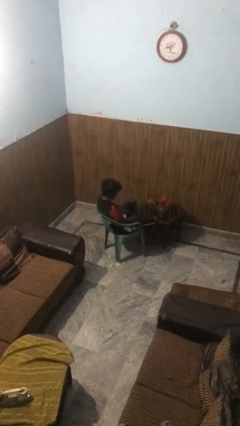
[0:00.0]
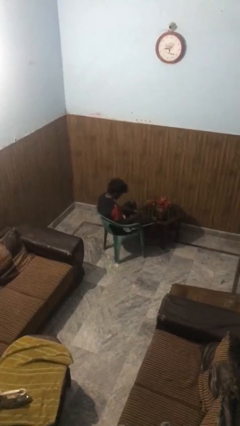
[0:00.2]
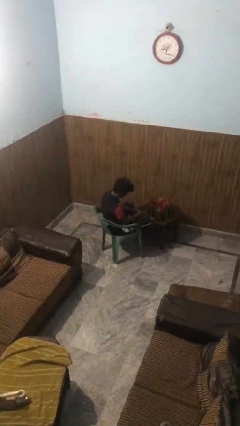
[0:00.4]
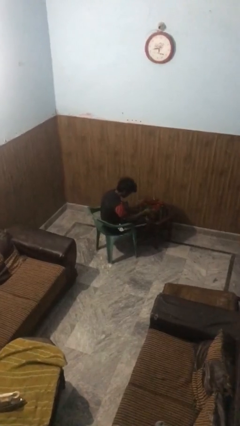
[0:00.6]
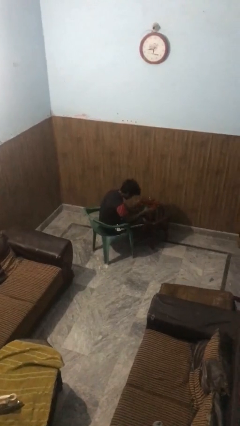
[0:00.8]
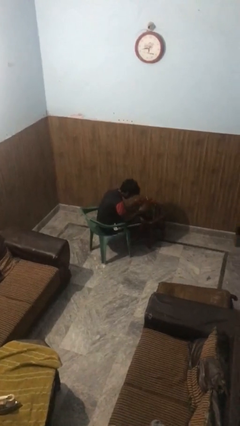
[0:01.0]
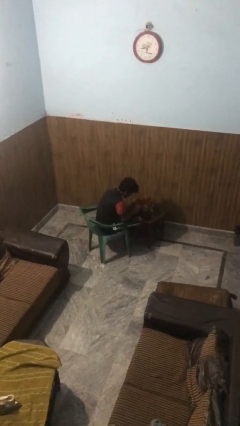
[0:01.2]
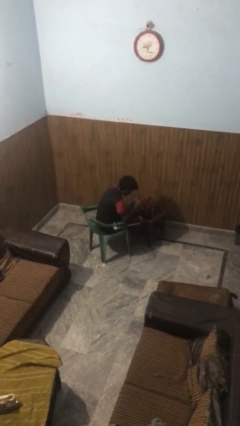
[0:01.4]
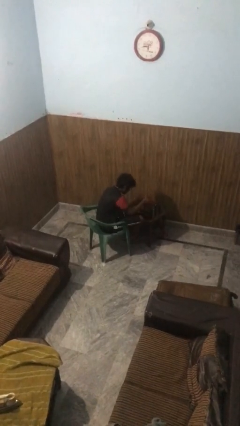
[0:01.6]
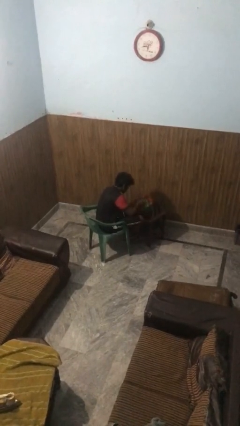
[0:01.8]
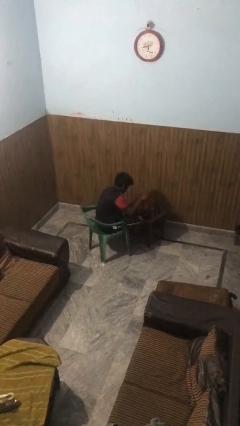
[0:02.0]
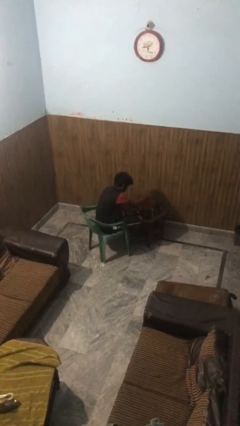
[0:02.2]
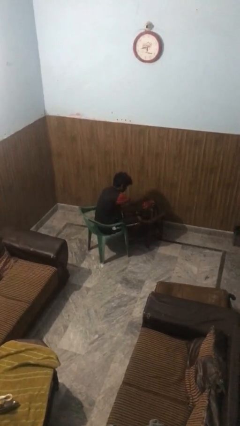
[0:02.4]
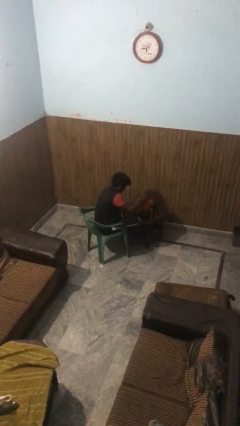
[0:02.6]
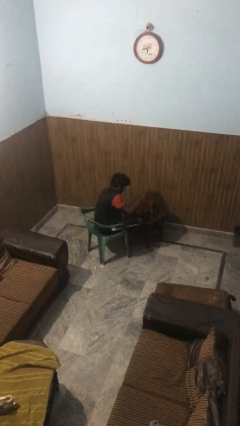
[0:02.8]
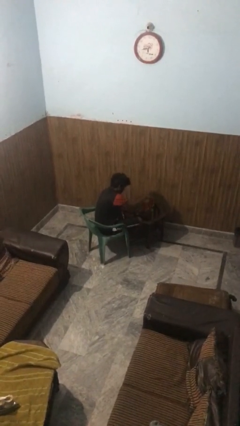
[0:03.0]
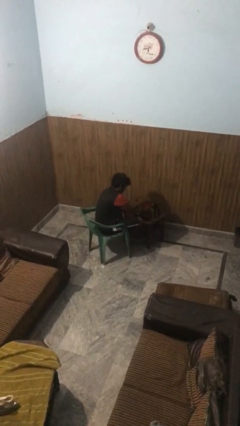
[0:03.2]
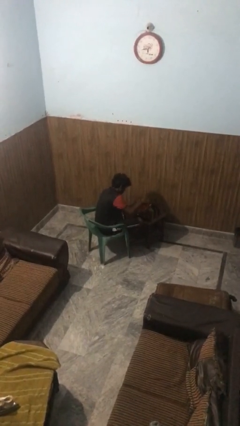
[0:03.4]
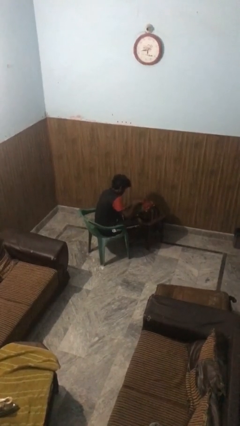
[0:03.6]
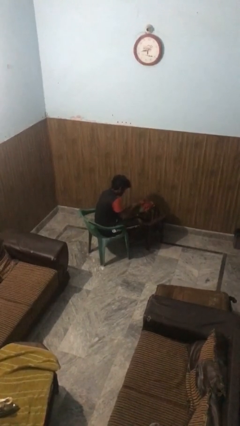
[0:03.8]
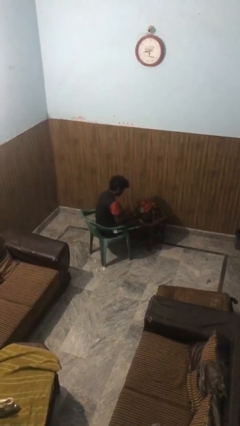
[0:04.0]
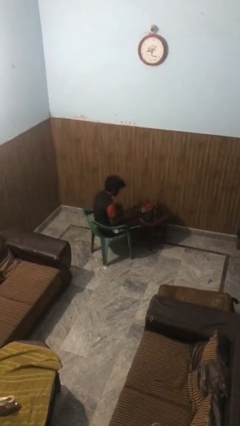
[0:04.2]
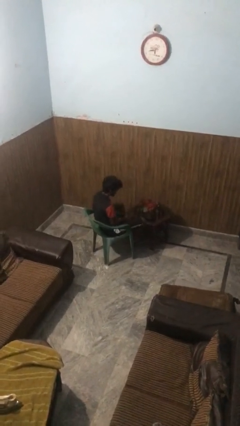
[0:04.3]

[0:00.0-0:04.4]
person arranges flowers in vase

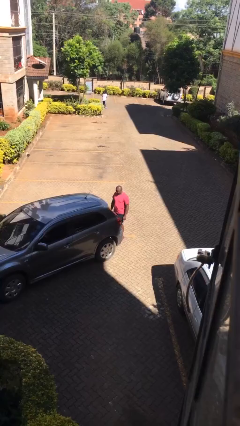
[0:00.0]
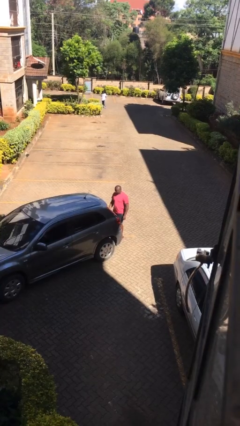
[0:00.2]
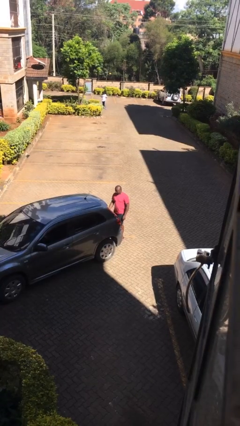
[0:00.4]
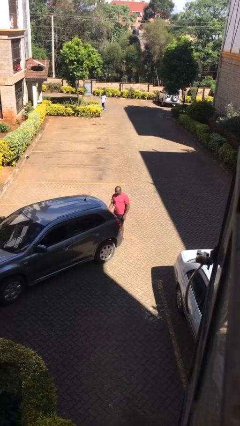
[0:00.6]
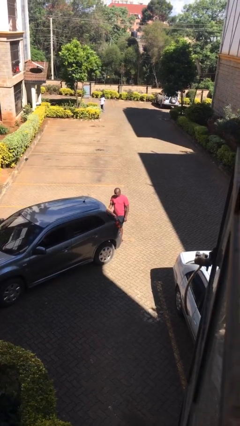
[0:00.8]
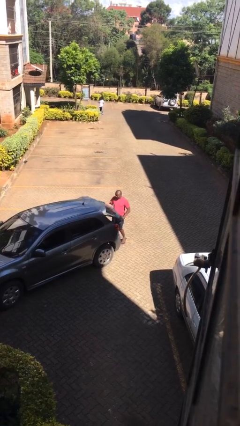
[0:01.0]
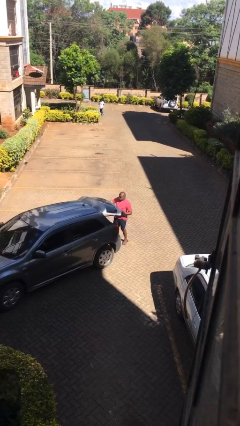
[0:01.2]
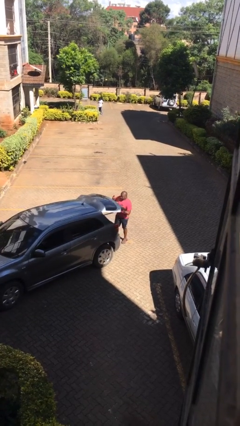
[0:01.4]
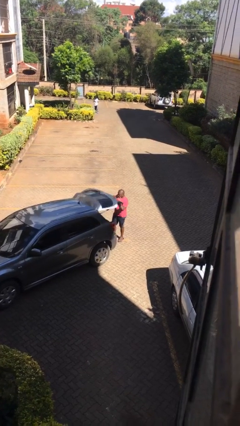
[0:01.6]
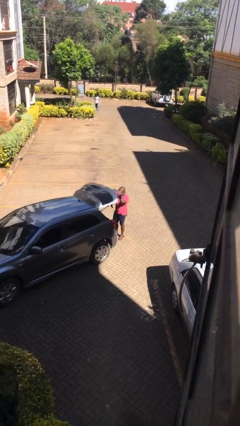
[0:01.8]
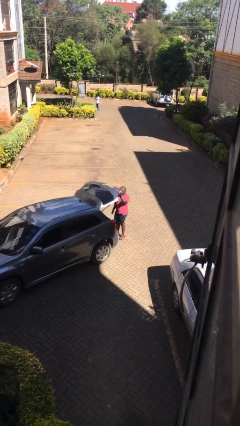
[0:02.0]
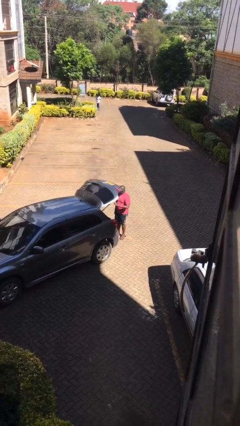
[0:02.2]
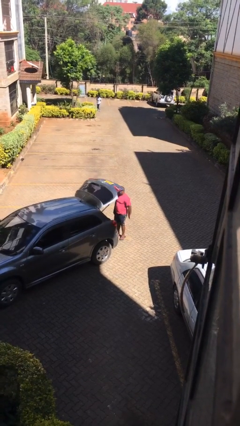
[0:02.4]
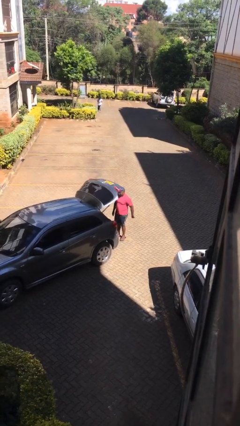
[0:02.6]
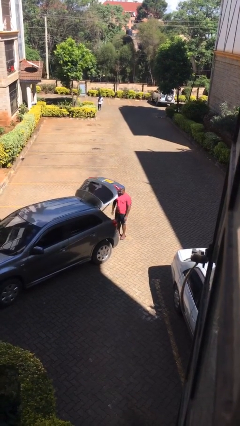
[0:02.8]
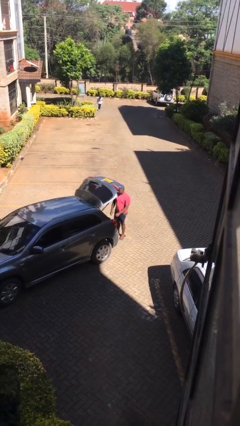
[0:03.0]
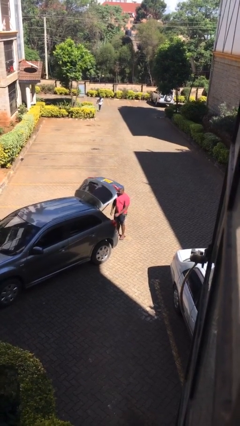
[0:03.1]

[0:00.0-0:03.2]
person opens car trunk

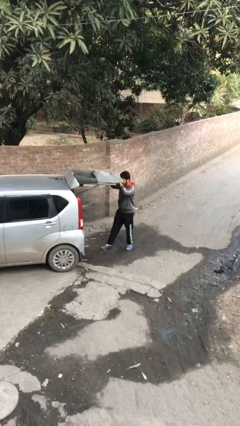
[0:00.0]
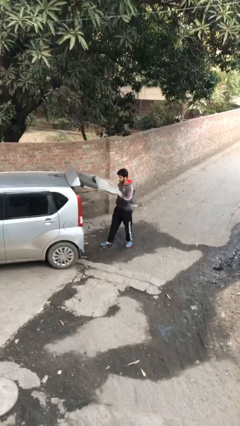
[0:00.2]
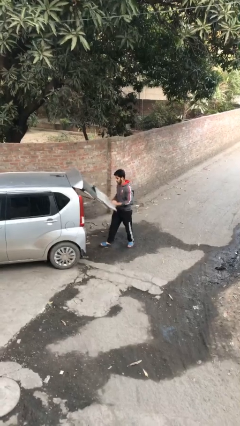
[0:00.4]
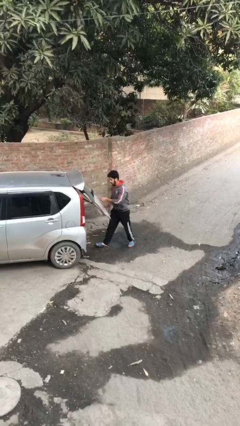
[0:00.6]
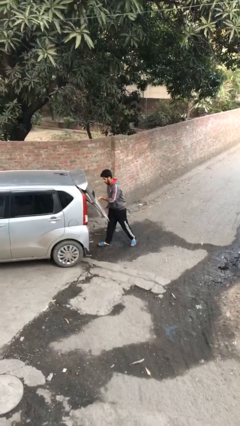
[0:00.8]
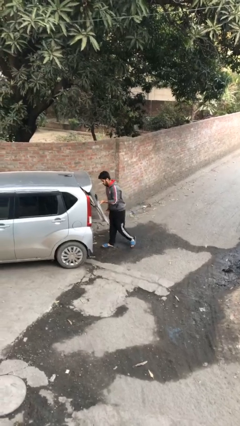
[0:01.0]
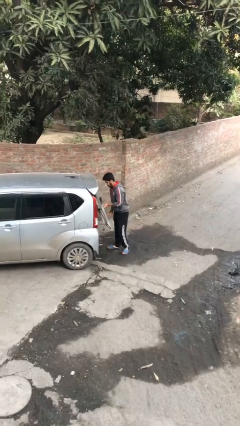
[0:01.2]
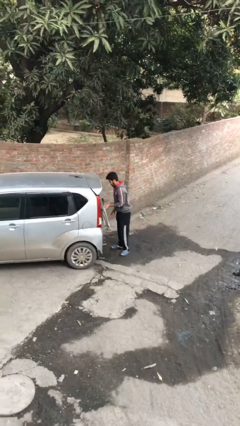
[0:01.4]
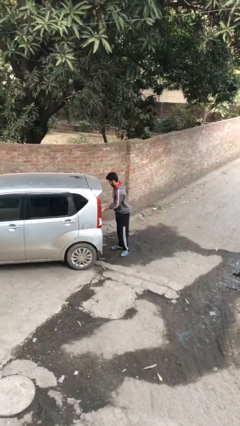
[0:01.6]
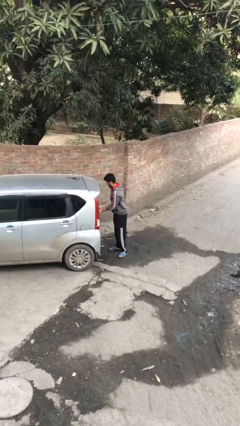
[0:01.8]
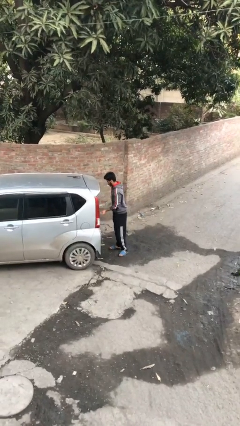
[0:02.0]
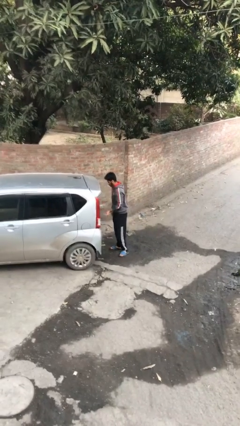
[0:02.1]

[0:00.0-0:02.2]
person closes car trunk

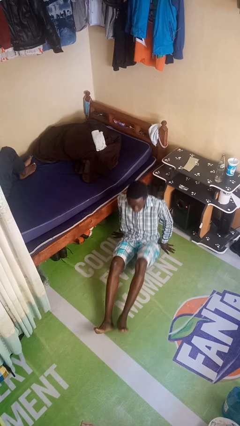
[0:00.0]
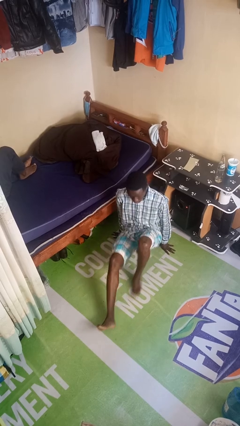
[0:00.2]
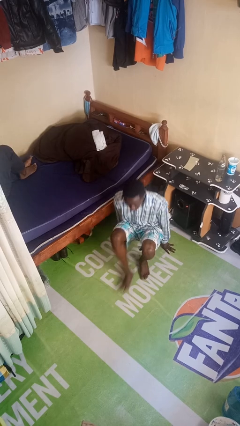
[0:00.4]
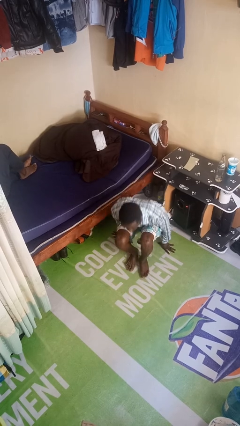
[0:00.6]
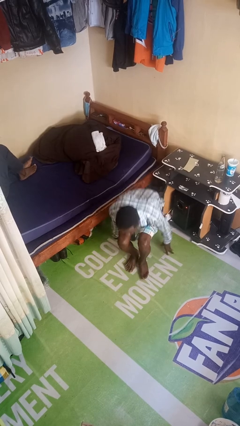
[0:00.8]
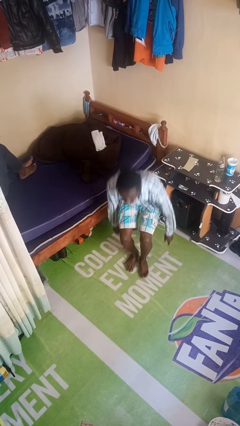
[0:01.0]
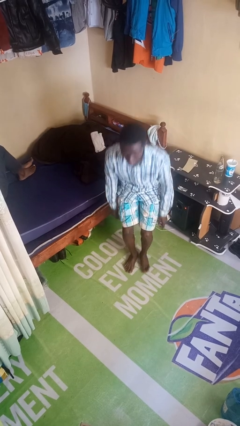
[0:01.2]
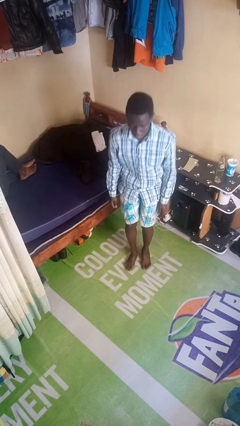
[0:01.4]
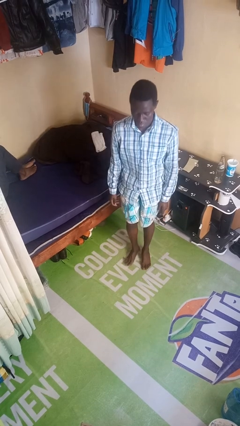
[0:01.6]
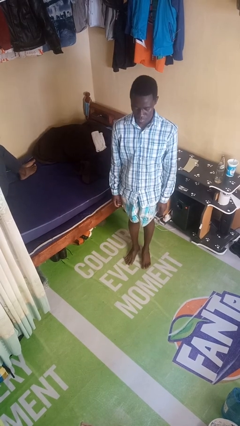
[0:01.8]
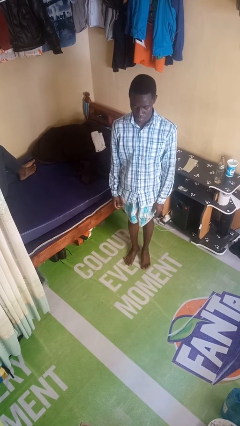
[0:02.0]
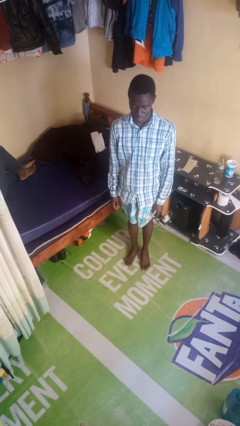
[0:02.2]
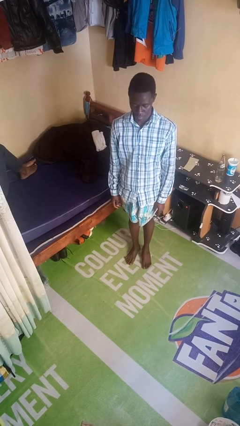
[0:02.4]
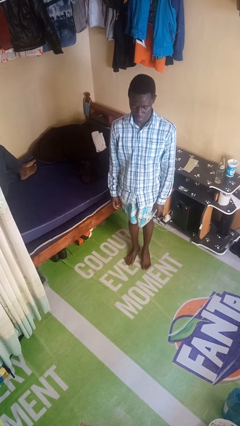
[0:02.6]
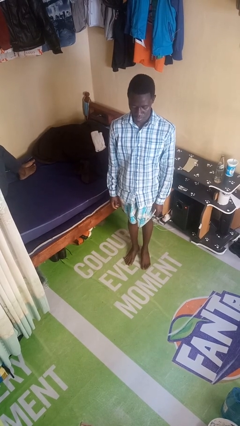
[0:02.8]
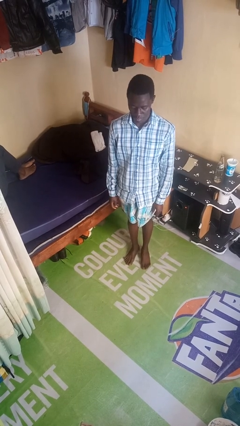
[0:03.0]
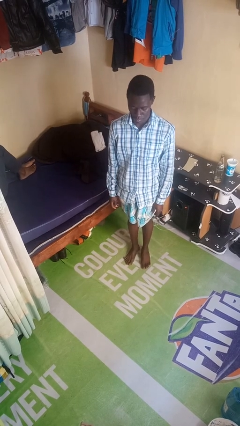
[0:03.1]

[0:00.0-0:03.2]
person stands up from floor

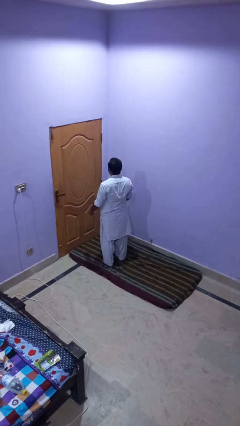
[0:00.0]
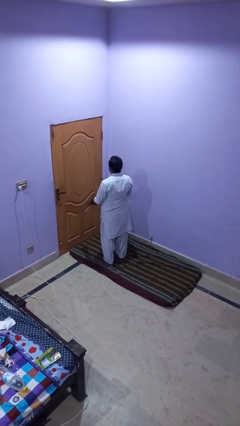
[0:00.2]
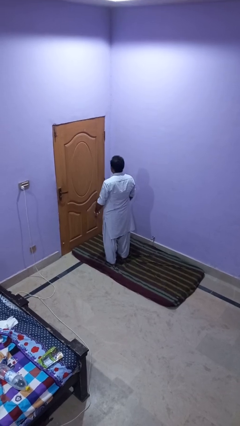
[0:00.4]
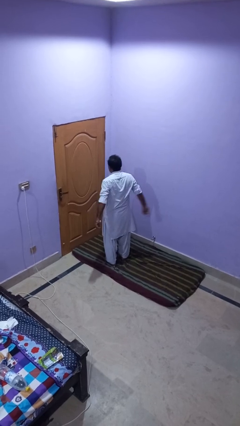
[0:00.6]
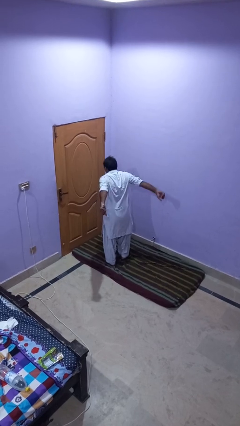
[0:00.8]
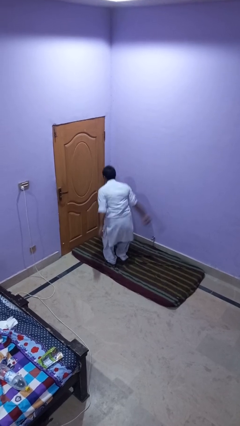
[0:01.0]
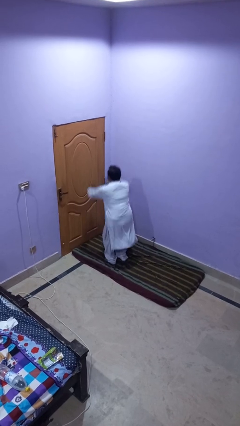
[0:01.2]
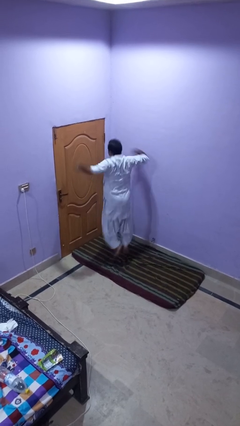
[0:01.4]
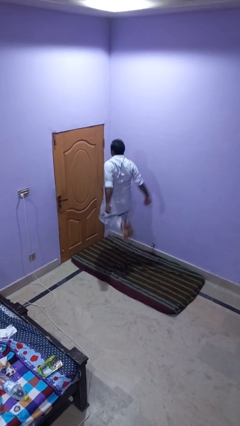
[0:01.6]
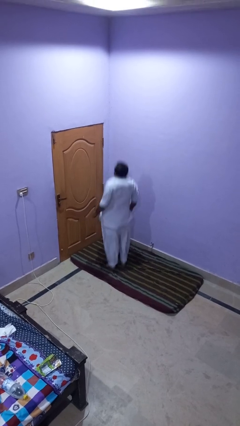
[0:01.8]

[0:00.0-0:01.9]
person jumps

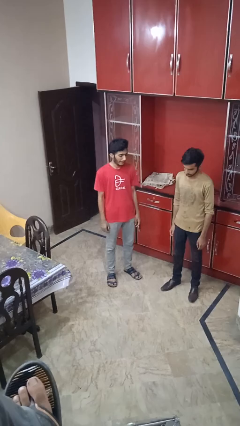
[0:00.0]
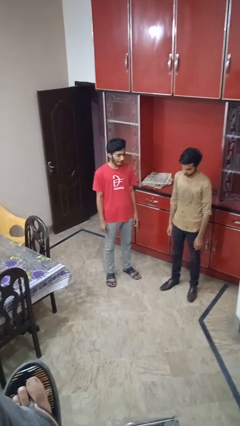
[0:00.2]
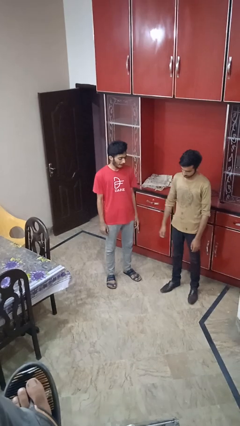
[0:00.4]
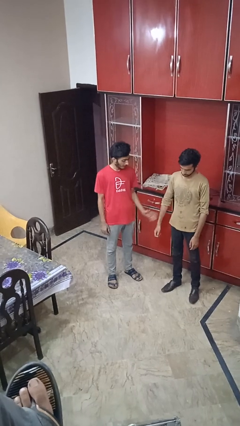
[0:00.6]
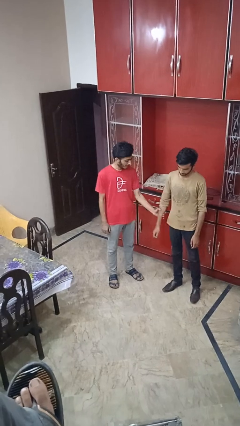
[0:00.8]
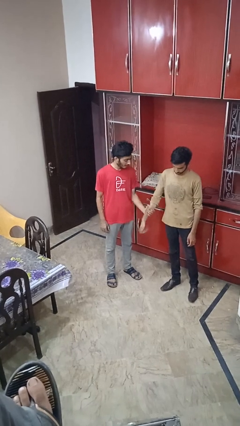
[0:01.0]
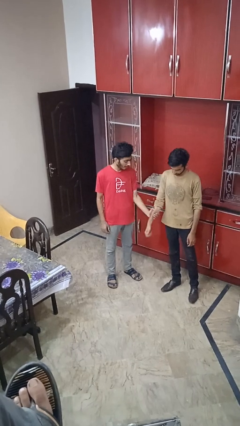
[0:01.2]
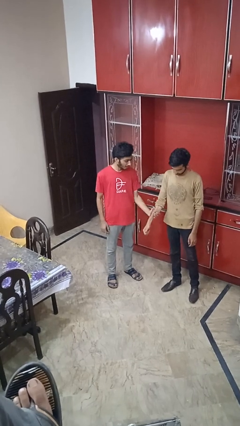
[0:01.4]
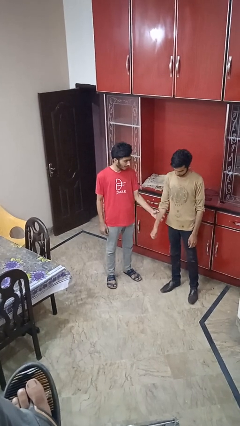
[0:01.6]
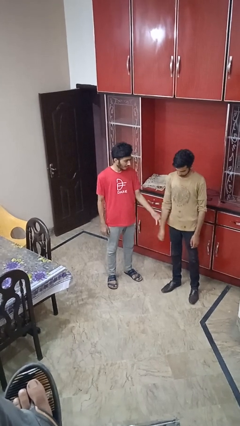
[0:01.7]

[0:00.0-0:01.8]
person grabs person by forearm

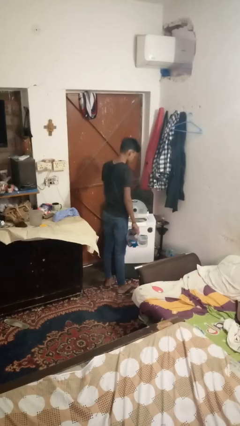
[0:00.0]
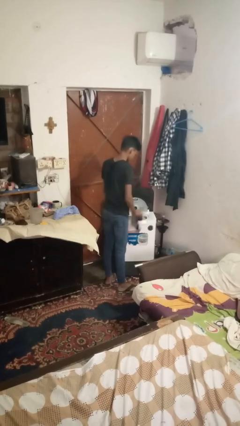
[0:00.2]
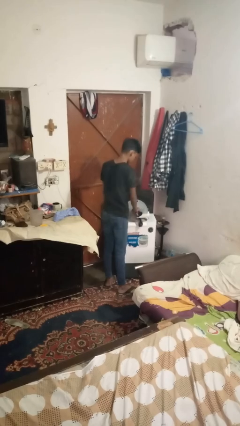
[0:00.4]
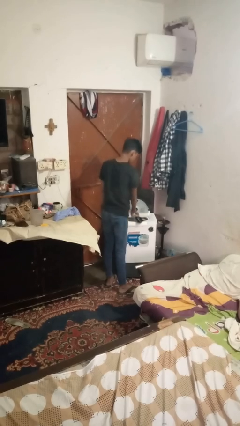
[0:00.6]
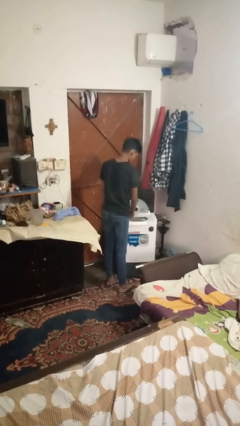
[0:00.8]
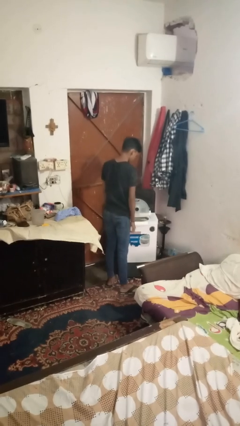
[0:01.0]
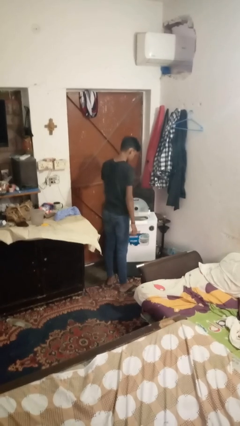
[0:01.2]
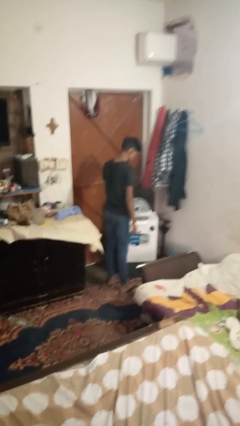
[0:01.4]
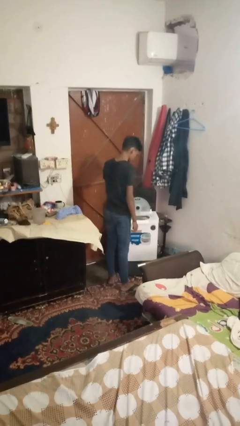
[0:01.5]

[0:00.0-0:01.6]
person loads clotheswasher
